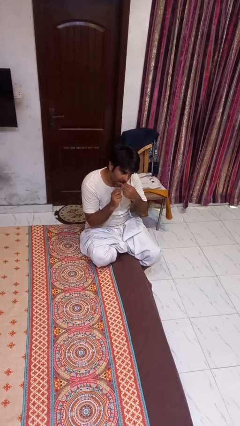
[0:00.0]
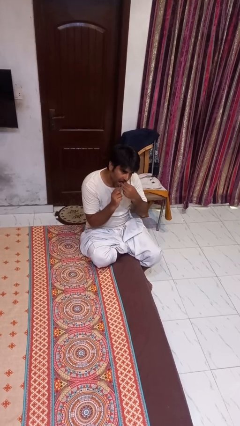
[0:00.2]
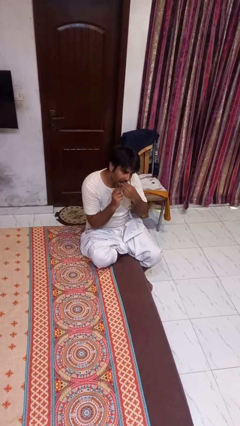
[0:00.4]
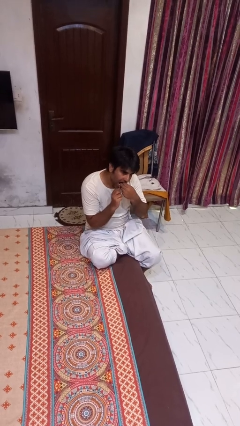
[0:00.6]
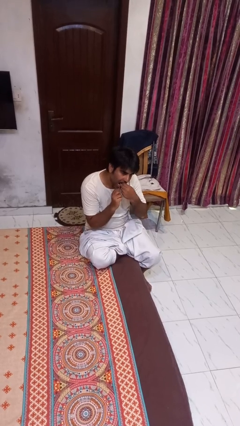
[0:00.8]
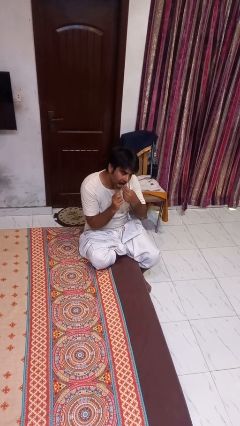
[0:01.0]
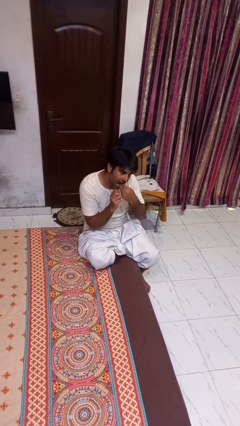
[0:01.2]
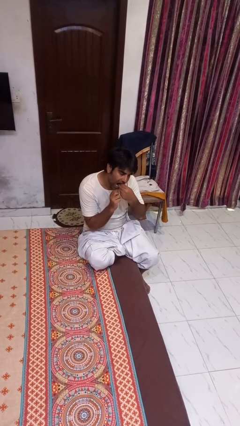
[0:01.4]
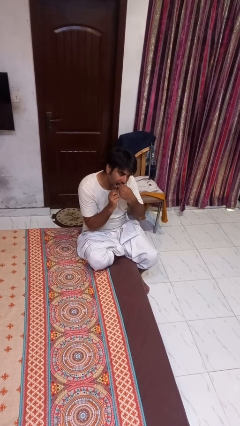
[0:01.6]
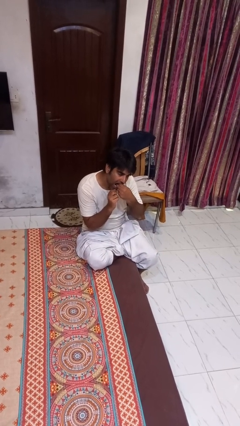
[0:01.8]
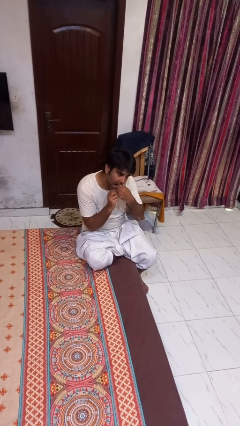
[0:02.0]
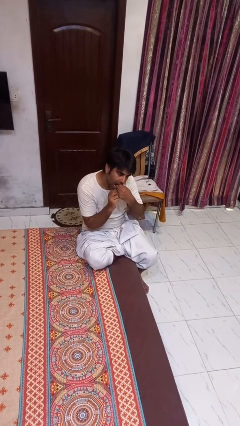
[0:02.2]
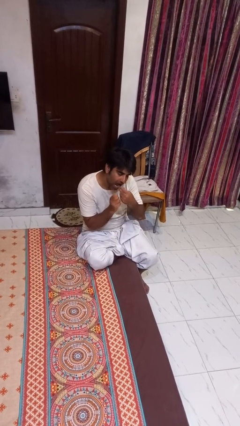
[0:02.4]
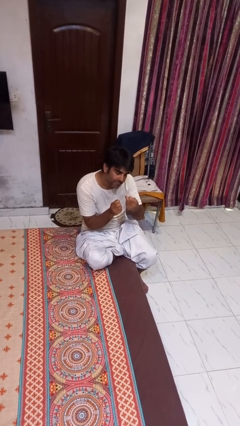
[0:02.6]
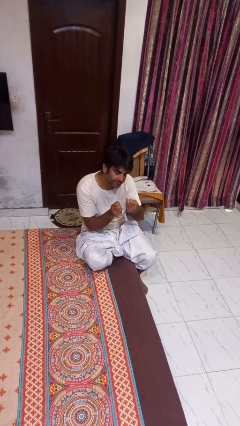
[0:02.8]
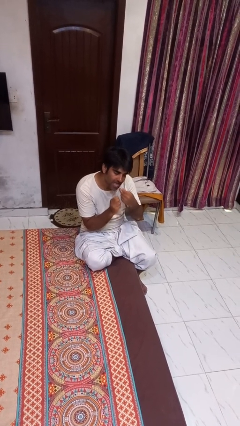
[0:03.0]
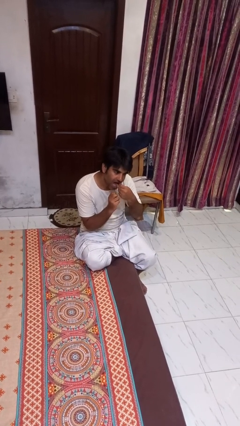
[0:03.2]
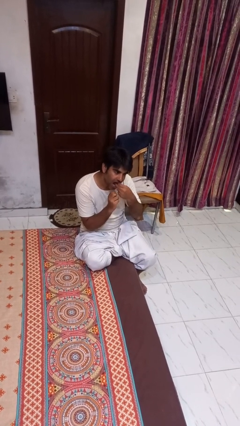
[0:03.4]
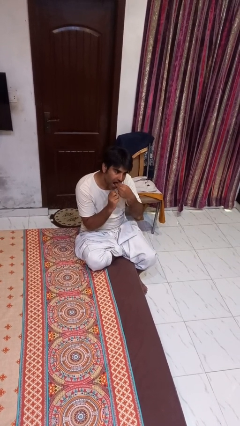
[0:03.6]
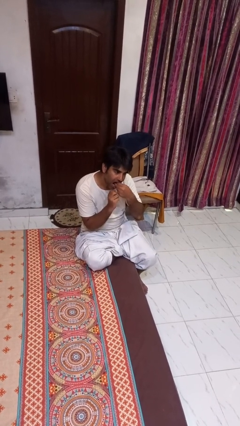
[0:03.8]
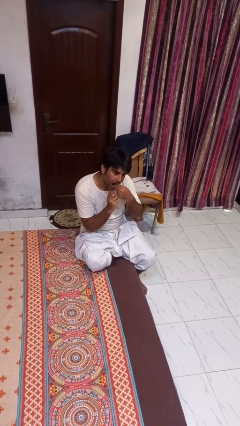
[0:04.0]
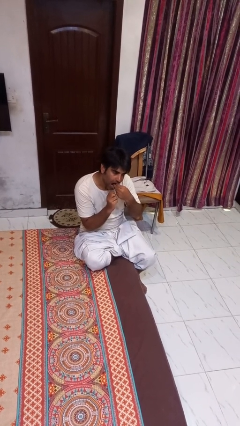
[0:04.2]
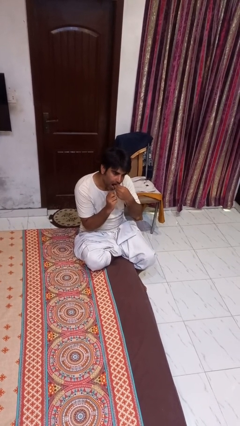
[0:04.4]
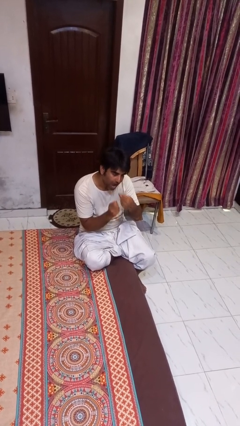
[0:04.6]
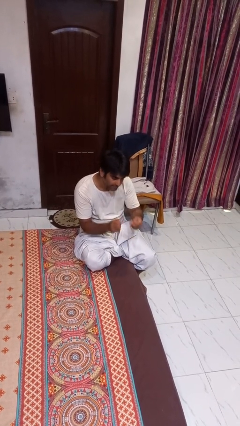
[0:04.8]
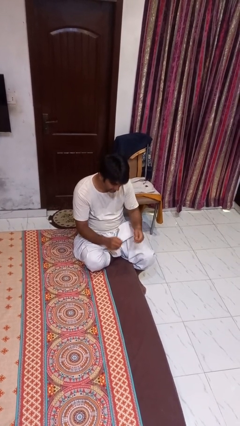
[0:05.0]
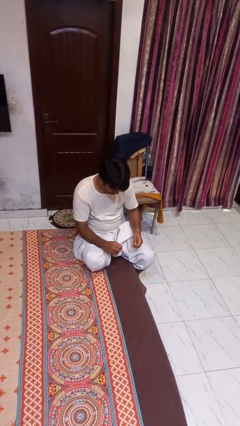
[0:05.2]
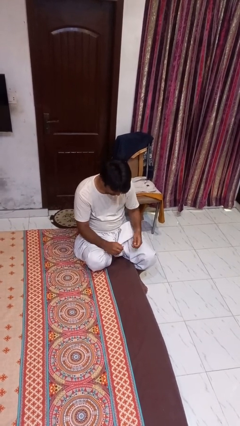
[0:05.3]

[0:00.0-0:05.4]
person flosses

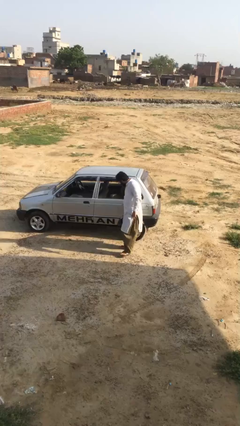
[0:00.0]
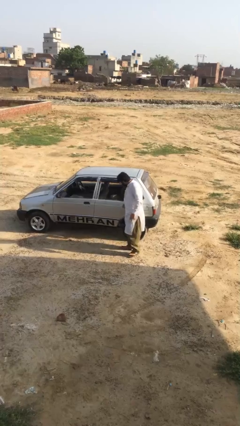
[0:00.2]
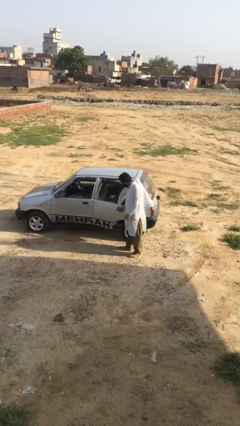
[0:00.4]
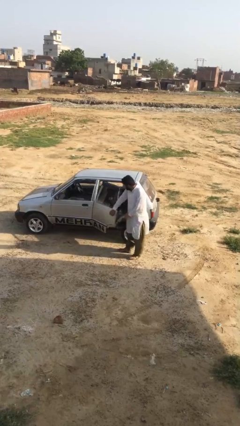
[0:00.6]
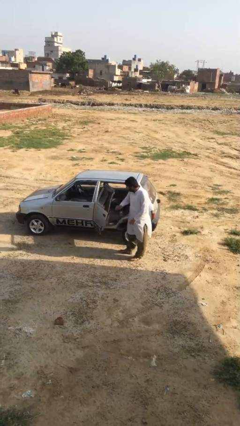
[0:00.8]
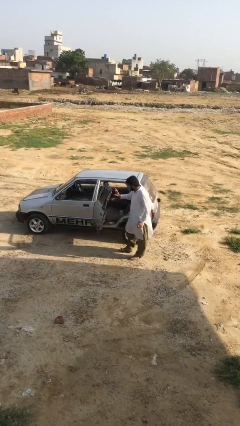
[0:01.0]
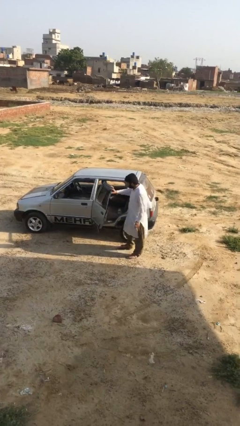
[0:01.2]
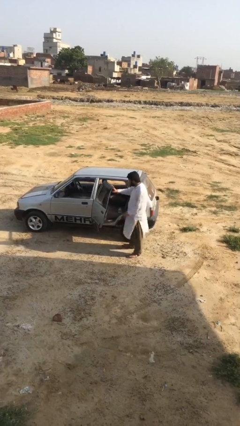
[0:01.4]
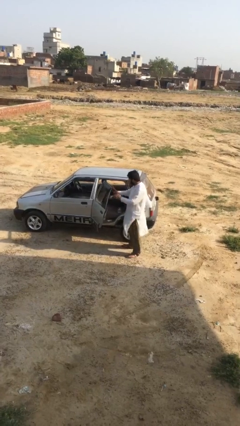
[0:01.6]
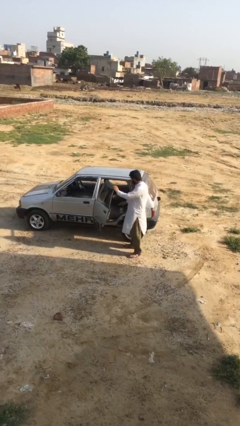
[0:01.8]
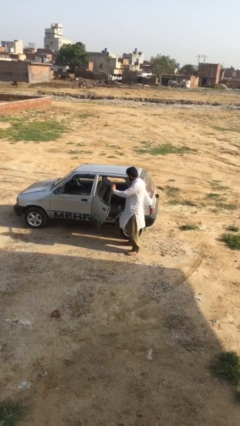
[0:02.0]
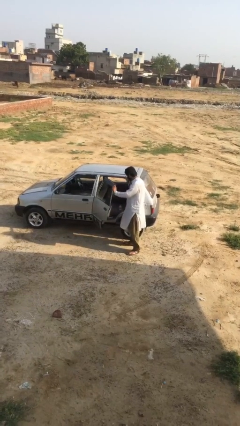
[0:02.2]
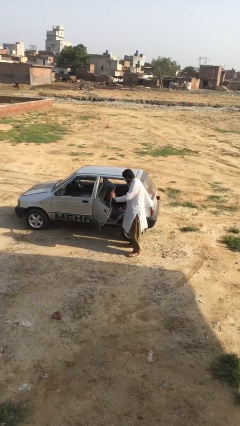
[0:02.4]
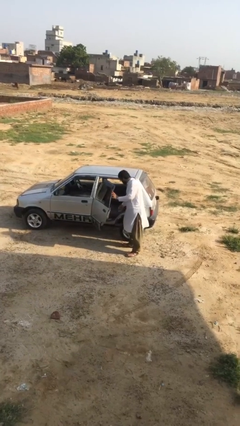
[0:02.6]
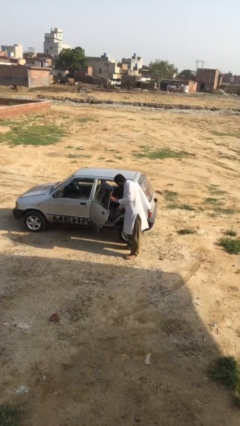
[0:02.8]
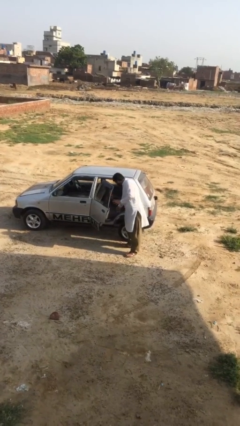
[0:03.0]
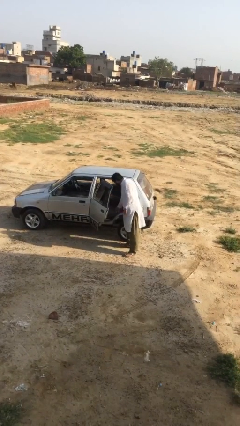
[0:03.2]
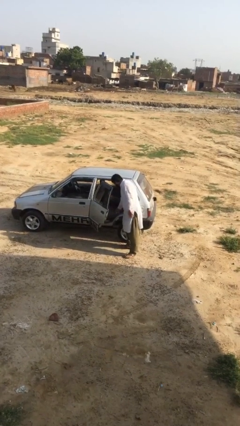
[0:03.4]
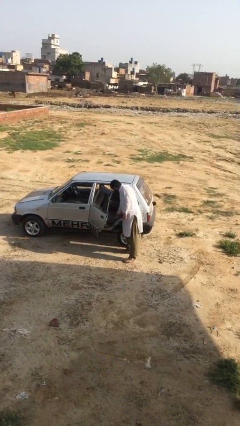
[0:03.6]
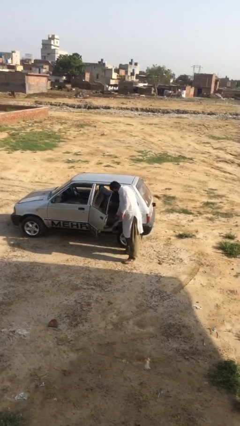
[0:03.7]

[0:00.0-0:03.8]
person opens car door

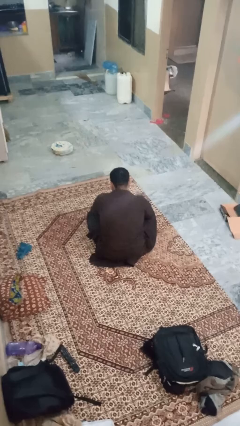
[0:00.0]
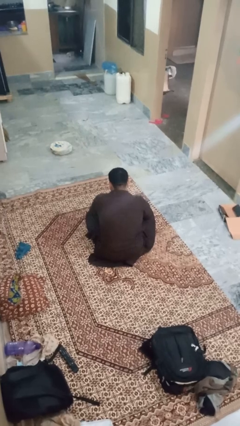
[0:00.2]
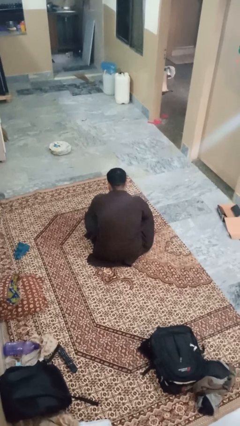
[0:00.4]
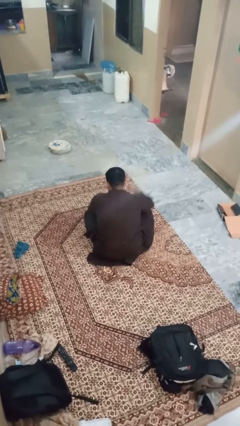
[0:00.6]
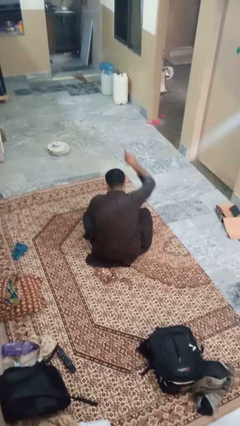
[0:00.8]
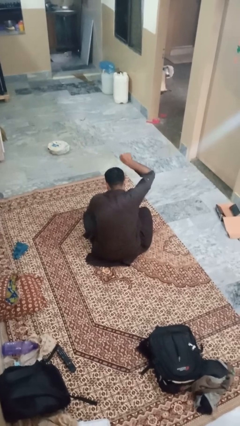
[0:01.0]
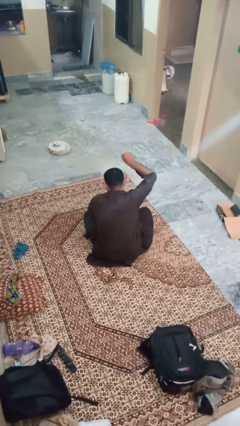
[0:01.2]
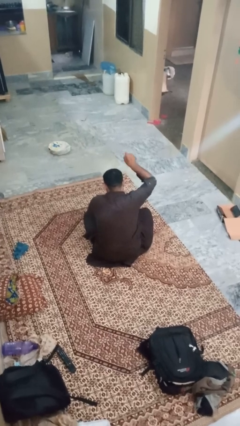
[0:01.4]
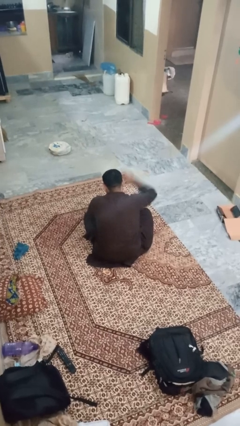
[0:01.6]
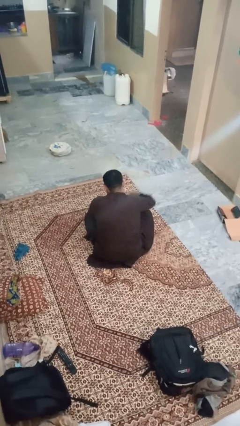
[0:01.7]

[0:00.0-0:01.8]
person gestures number one

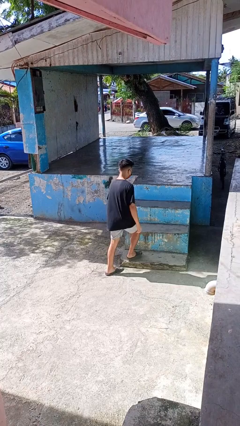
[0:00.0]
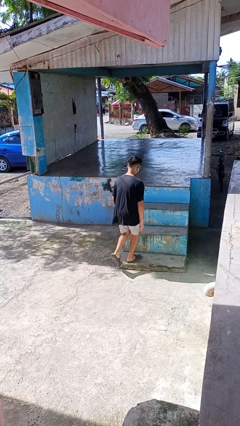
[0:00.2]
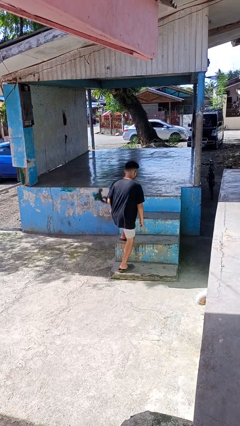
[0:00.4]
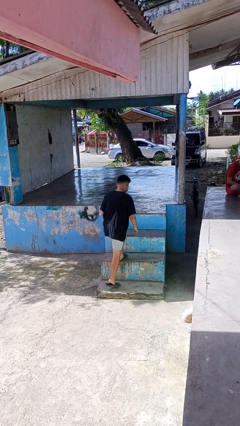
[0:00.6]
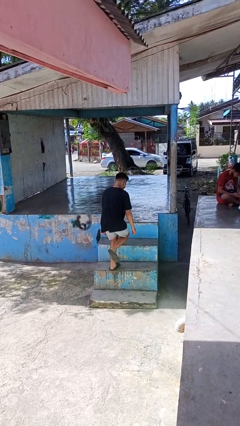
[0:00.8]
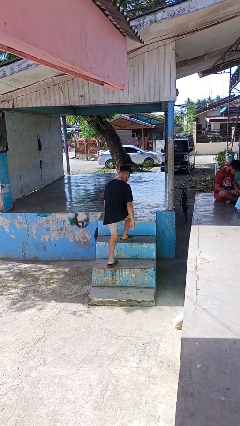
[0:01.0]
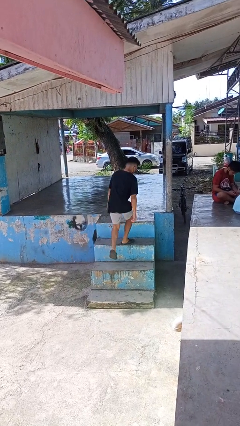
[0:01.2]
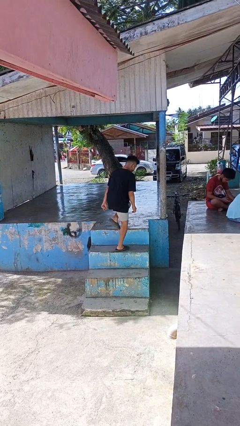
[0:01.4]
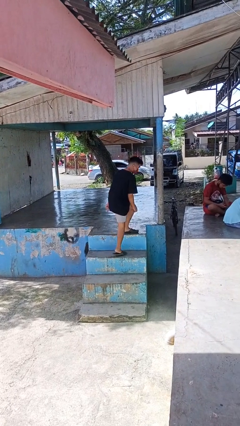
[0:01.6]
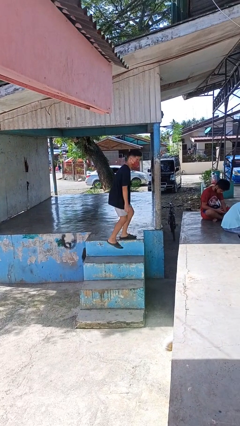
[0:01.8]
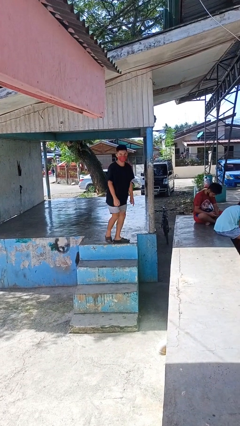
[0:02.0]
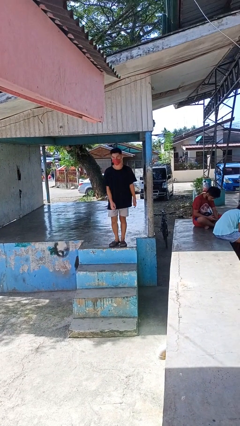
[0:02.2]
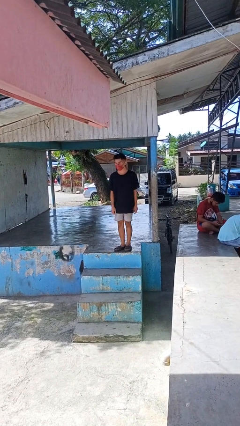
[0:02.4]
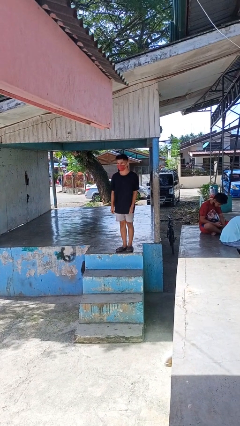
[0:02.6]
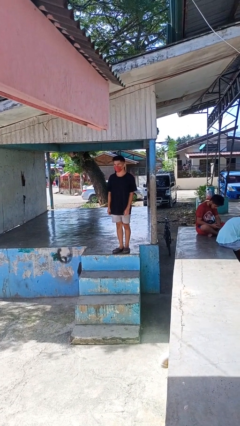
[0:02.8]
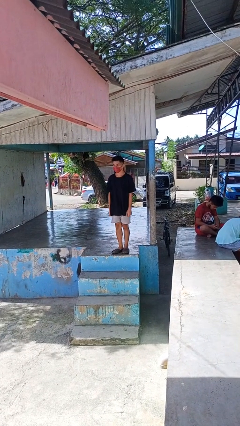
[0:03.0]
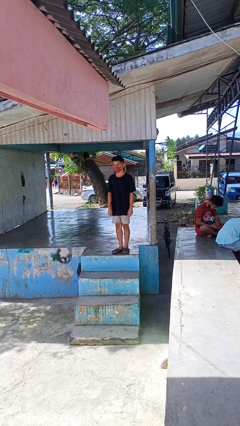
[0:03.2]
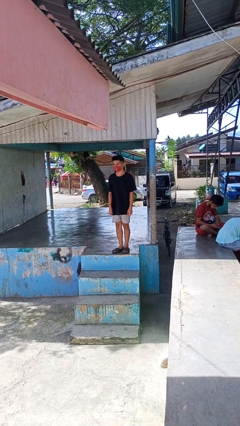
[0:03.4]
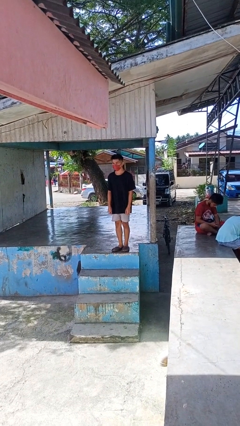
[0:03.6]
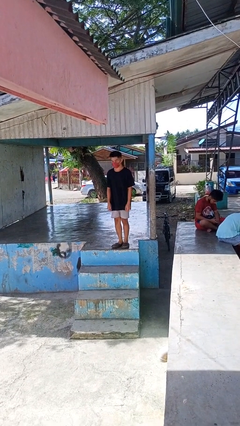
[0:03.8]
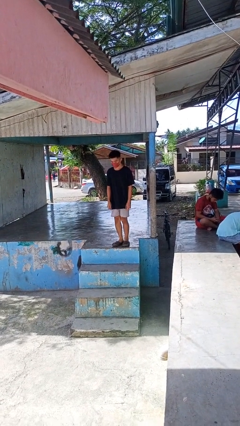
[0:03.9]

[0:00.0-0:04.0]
person climbs up stairs

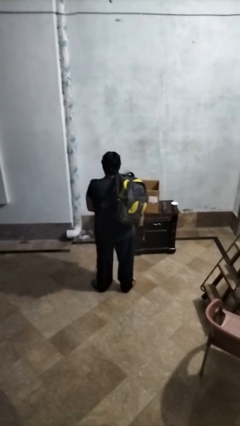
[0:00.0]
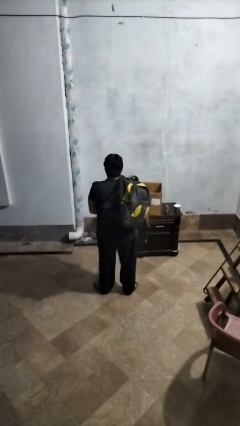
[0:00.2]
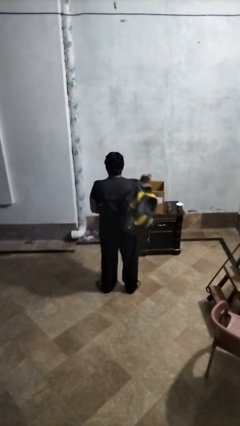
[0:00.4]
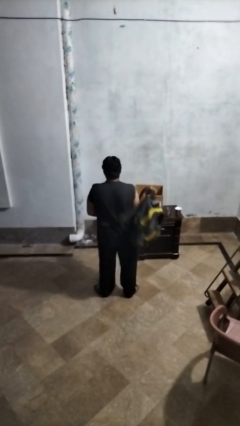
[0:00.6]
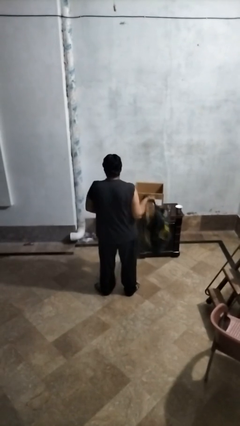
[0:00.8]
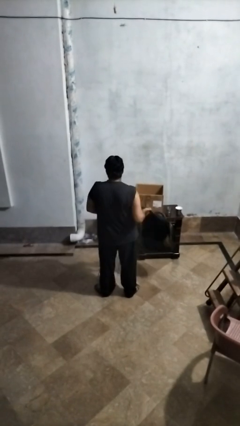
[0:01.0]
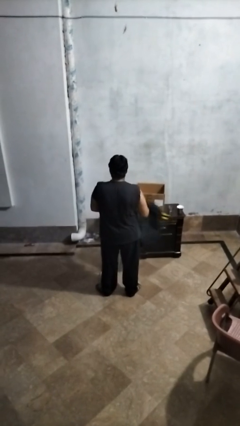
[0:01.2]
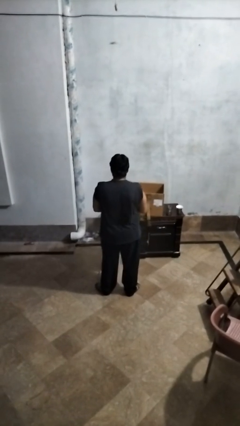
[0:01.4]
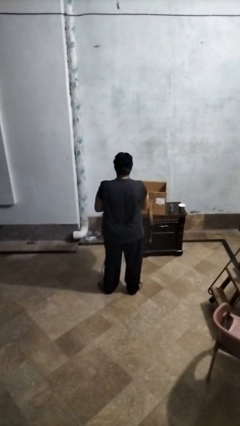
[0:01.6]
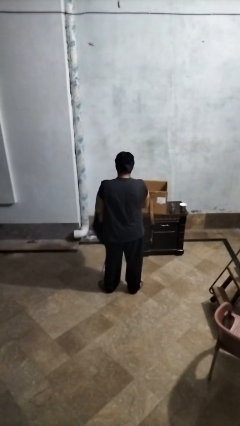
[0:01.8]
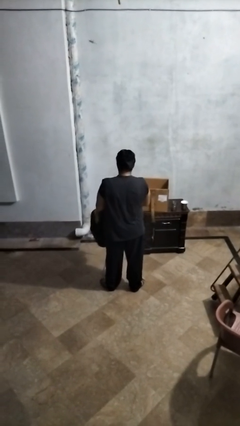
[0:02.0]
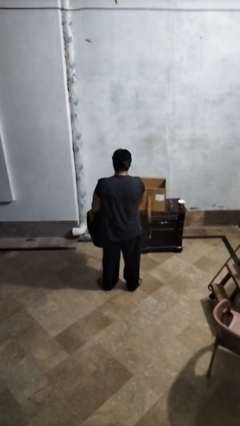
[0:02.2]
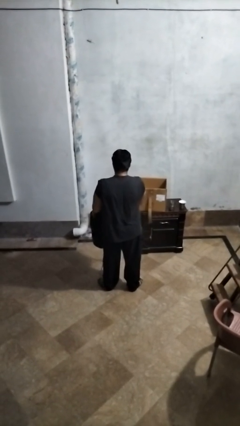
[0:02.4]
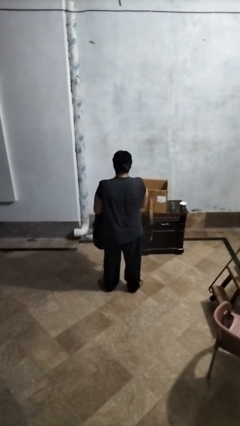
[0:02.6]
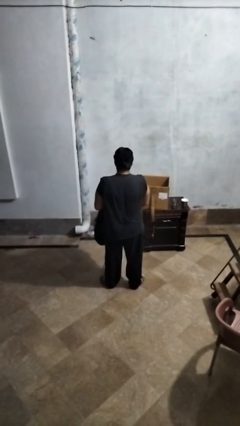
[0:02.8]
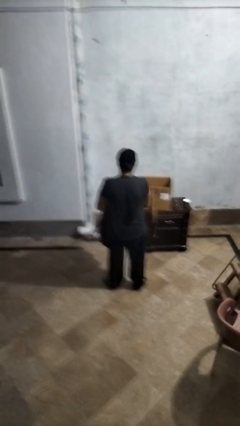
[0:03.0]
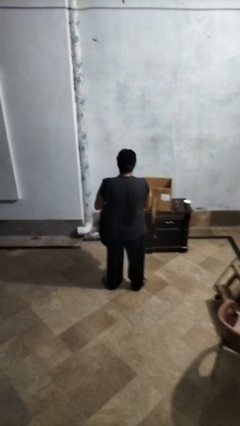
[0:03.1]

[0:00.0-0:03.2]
person takes off backpack
